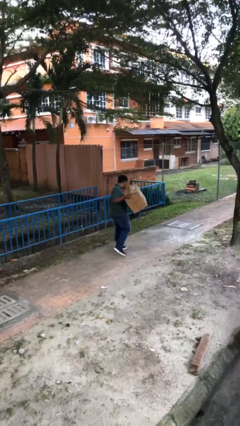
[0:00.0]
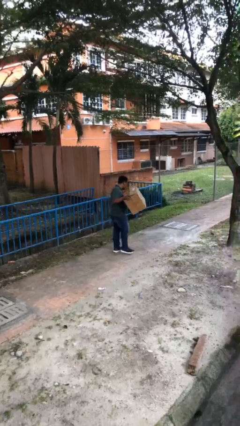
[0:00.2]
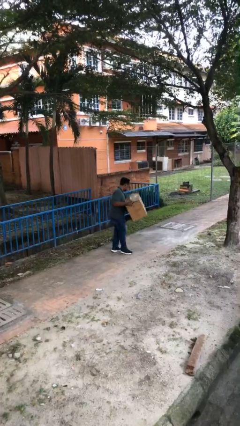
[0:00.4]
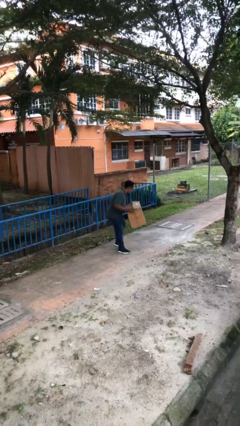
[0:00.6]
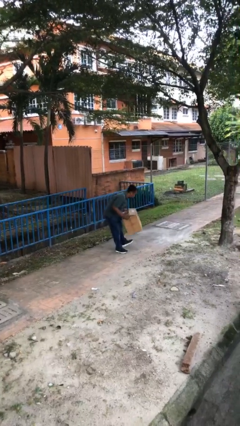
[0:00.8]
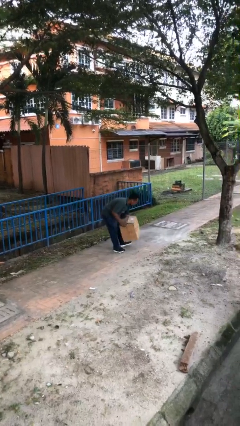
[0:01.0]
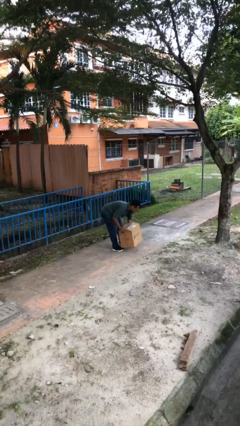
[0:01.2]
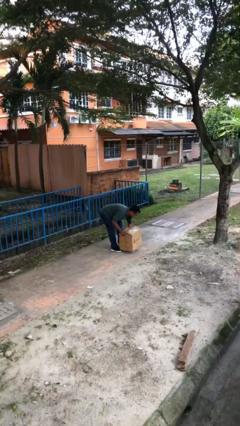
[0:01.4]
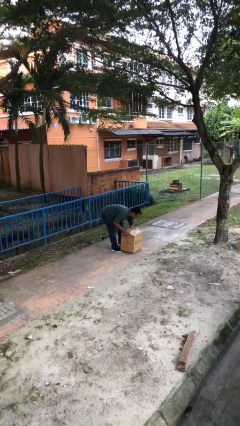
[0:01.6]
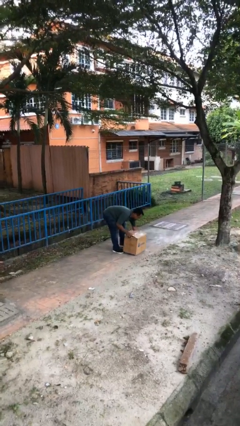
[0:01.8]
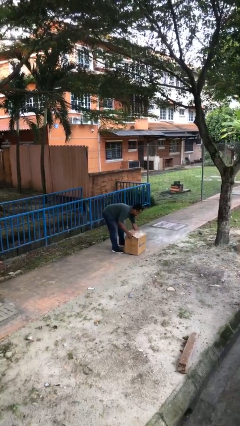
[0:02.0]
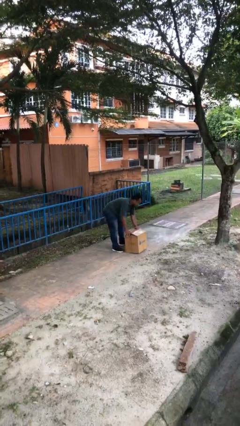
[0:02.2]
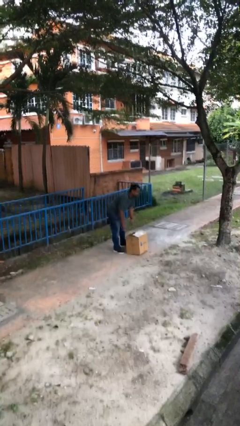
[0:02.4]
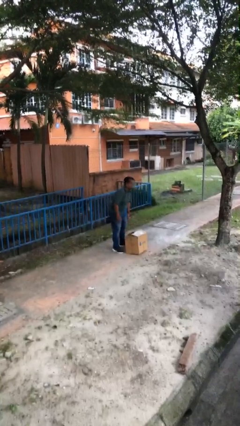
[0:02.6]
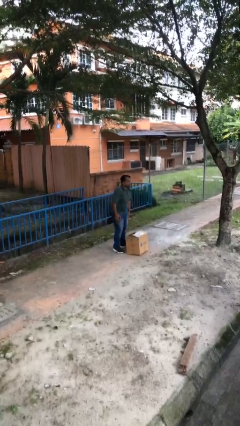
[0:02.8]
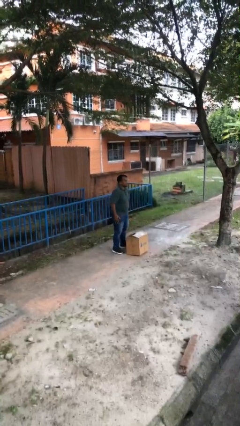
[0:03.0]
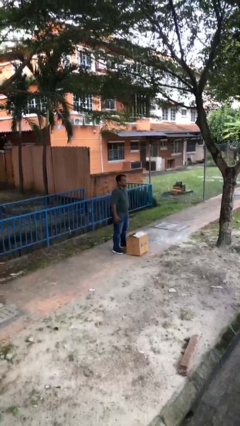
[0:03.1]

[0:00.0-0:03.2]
person puts down object on floor

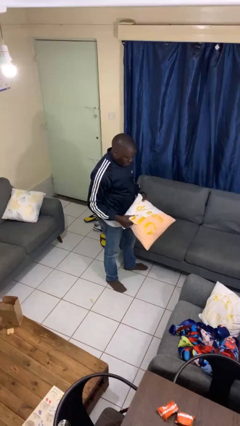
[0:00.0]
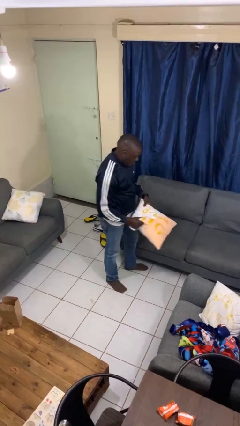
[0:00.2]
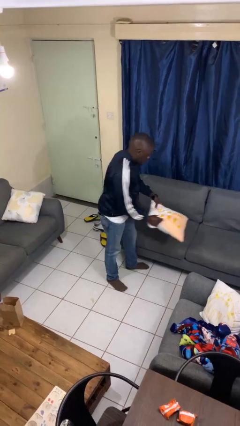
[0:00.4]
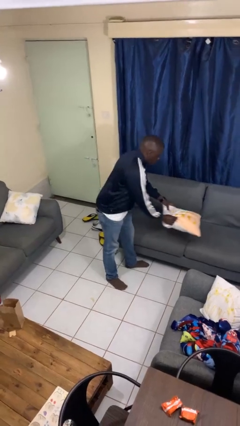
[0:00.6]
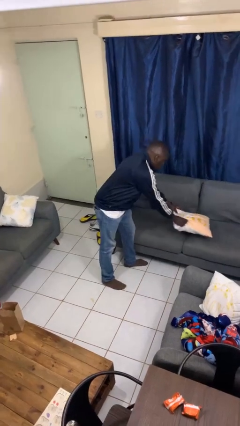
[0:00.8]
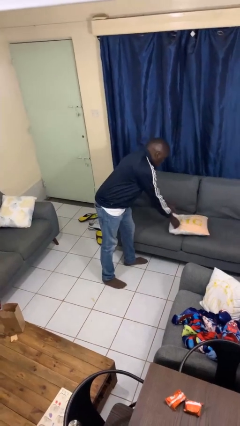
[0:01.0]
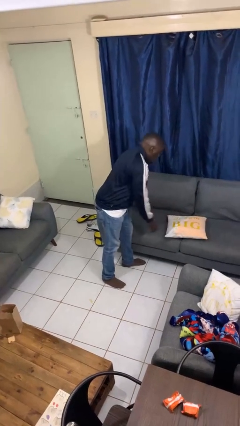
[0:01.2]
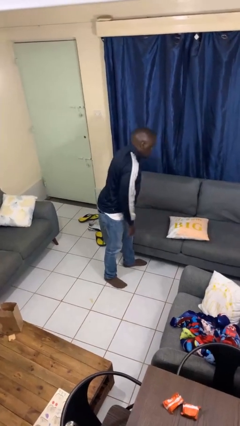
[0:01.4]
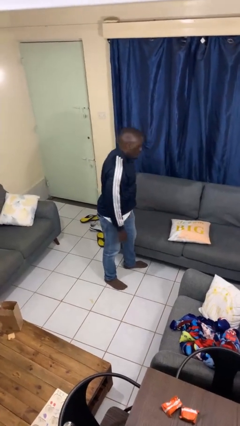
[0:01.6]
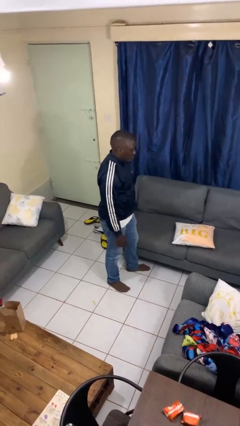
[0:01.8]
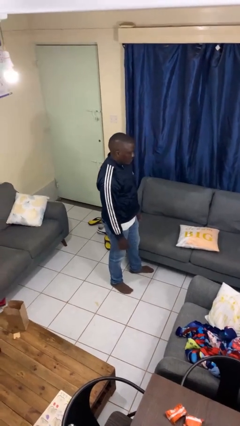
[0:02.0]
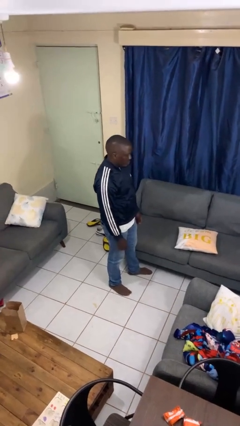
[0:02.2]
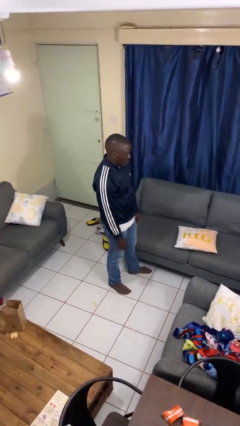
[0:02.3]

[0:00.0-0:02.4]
person puts down object on couch

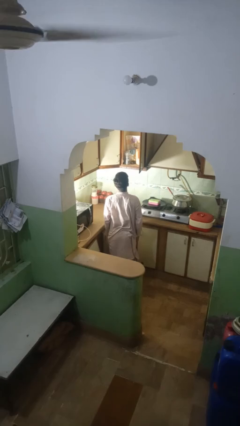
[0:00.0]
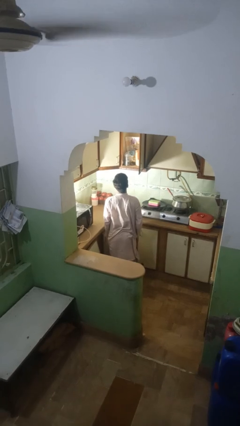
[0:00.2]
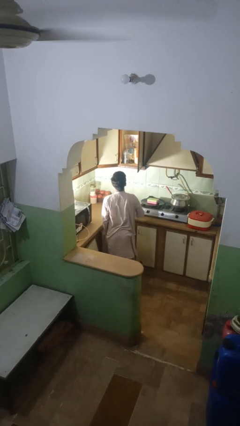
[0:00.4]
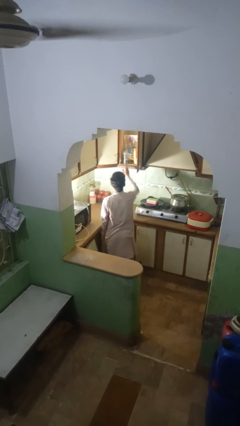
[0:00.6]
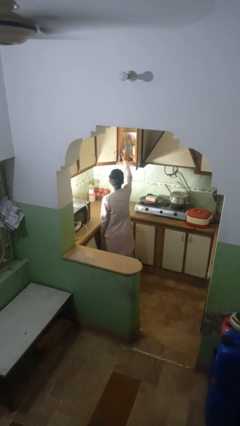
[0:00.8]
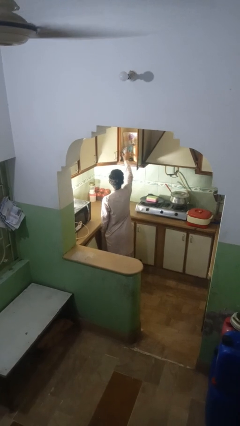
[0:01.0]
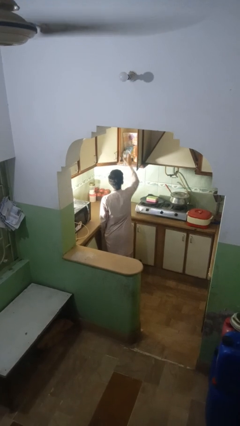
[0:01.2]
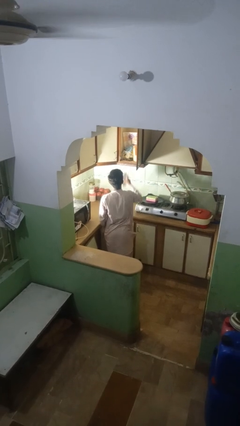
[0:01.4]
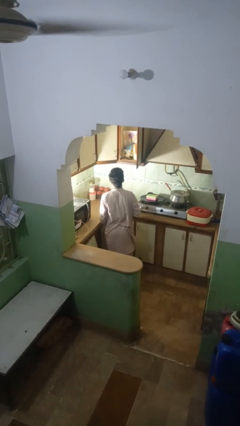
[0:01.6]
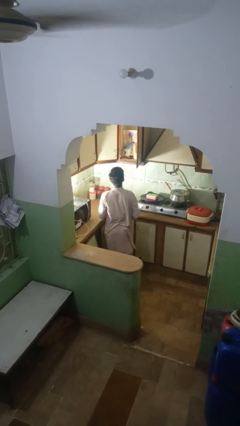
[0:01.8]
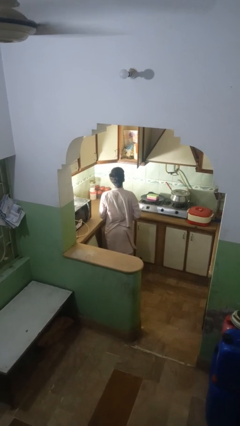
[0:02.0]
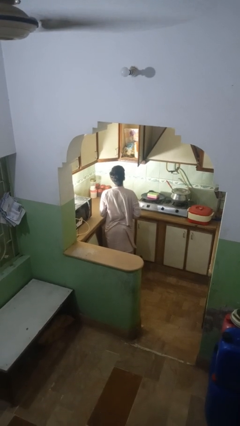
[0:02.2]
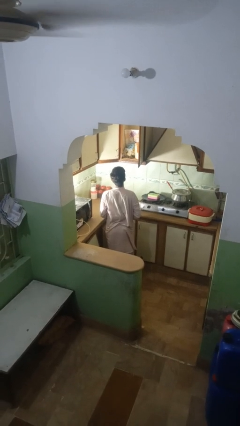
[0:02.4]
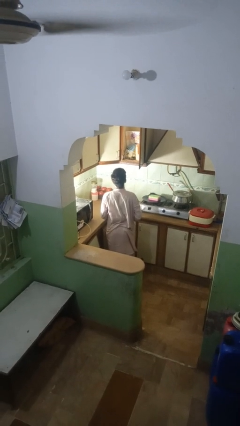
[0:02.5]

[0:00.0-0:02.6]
person takes object from kitchen drawer

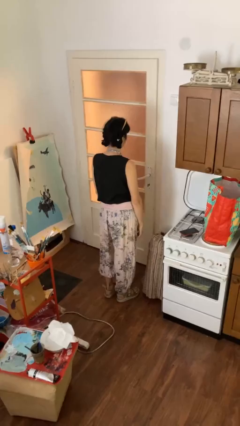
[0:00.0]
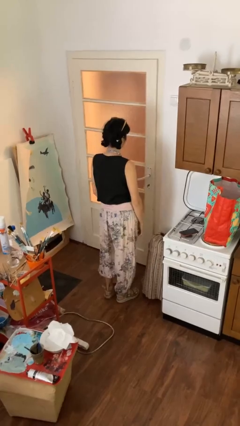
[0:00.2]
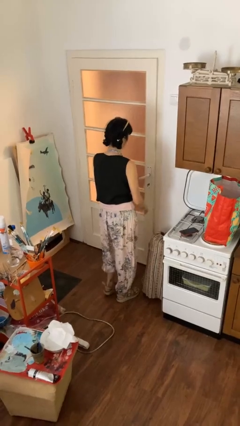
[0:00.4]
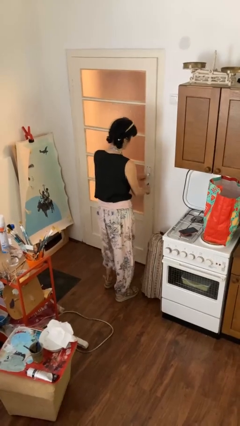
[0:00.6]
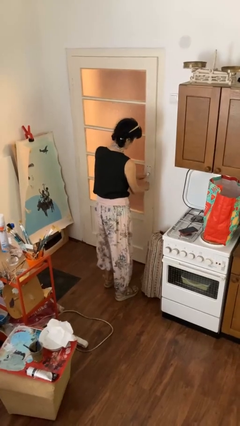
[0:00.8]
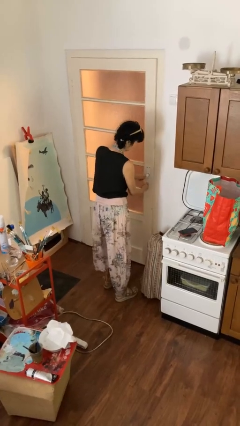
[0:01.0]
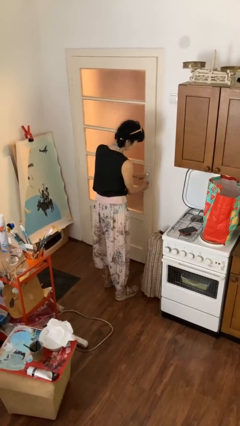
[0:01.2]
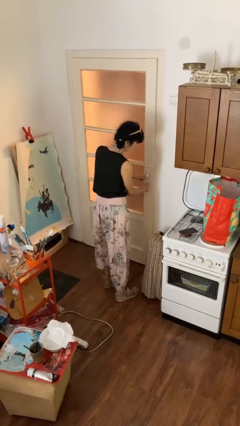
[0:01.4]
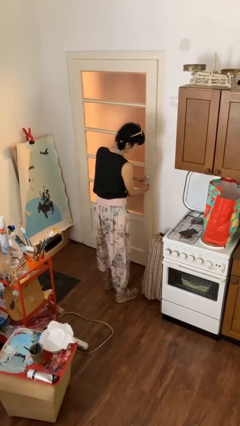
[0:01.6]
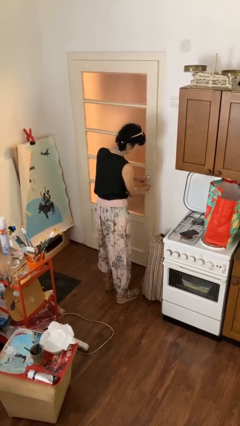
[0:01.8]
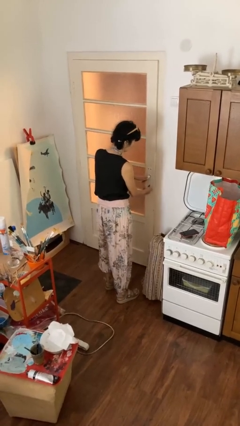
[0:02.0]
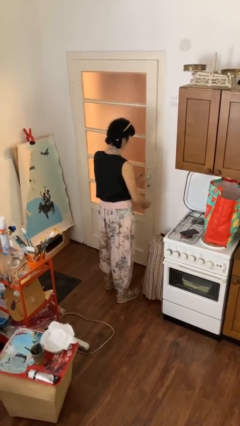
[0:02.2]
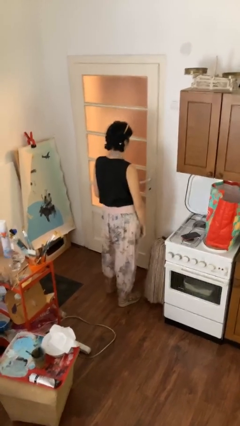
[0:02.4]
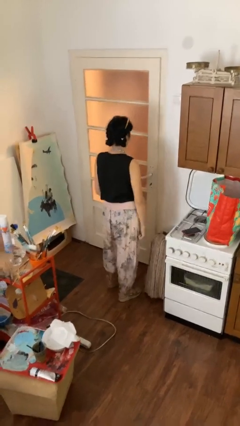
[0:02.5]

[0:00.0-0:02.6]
person locks door with keys

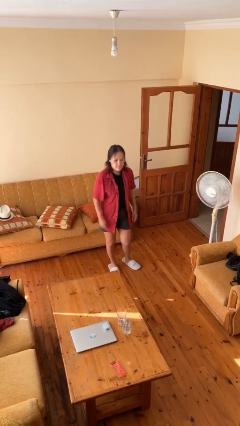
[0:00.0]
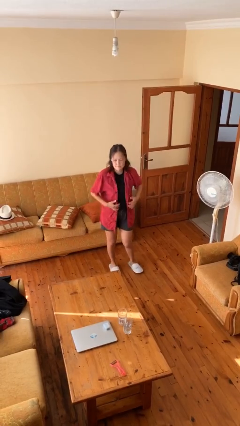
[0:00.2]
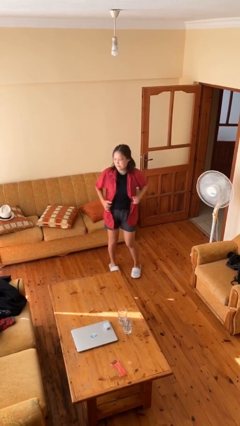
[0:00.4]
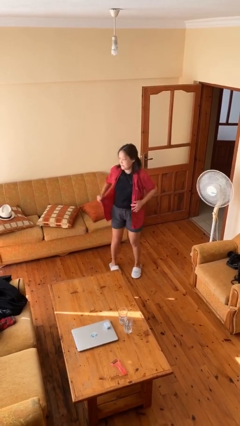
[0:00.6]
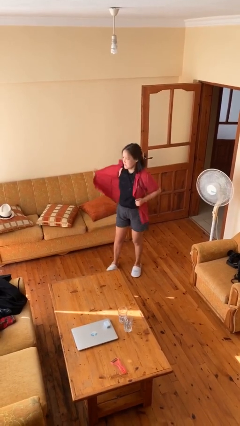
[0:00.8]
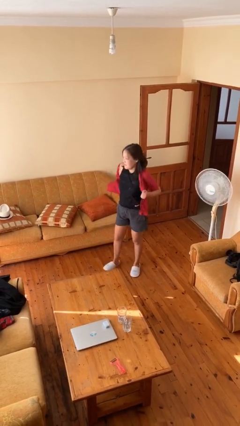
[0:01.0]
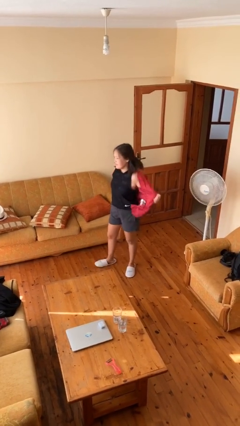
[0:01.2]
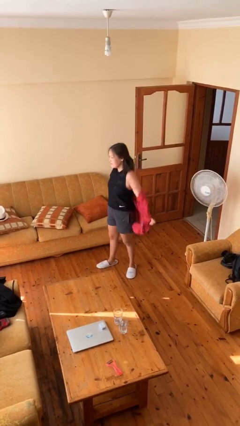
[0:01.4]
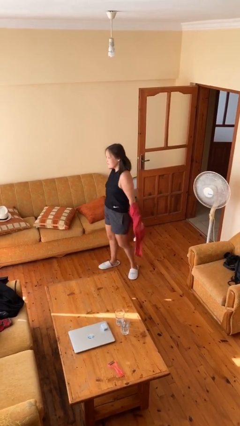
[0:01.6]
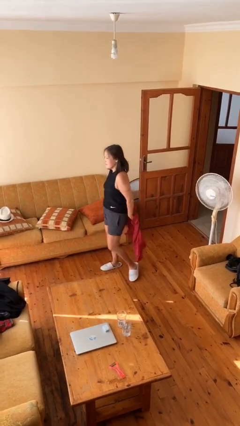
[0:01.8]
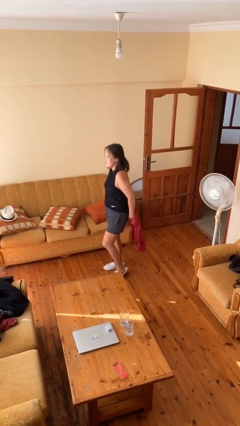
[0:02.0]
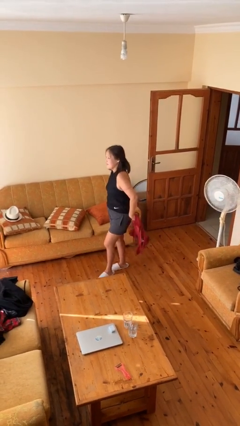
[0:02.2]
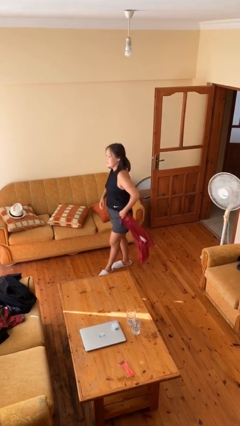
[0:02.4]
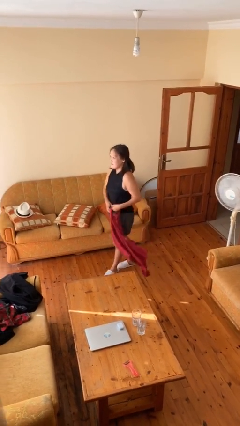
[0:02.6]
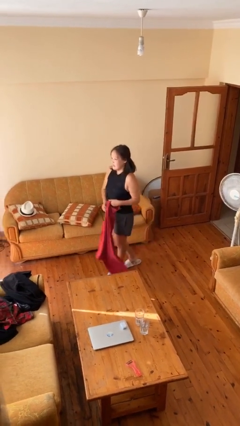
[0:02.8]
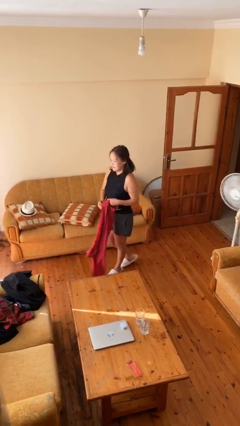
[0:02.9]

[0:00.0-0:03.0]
person takes off shirt

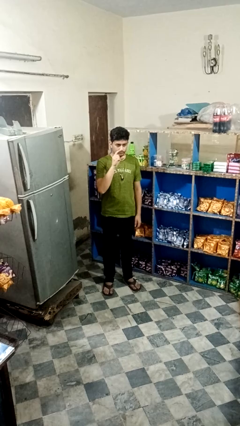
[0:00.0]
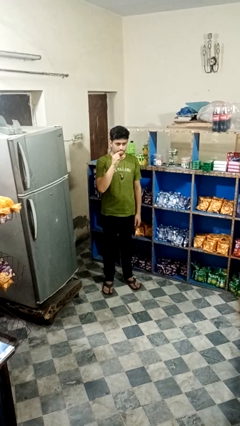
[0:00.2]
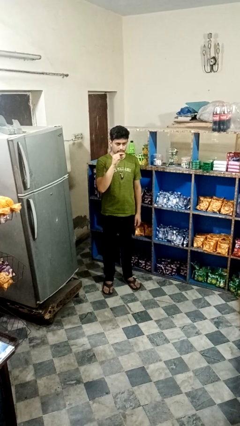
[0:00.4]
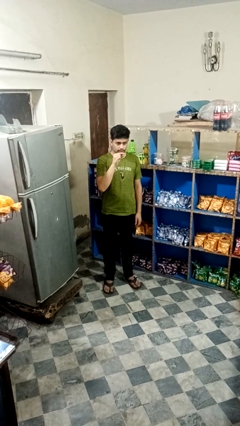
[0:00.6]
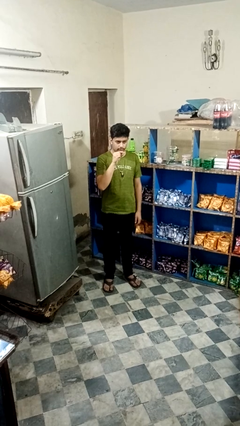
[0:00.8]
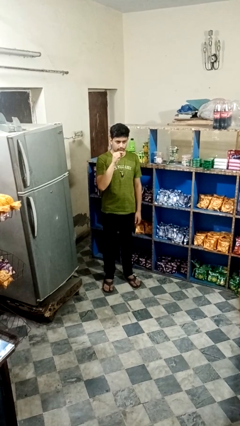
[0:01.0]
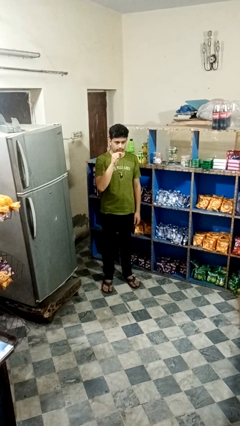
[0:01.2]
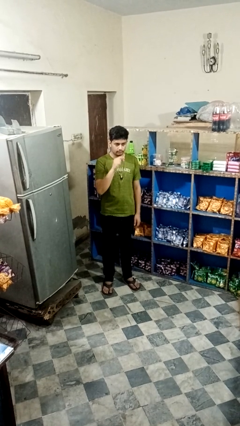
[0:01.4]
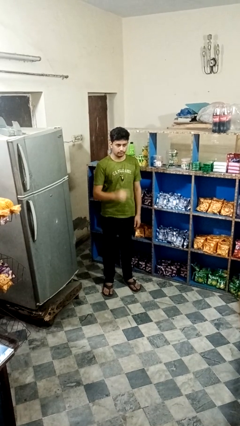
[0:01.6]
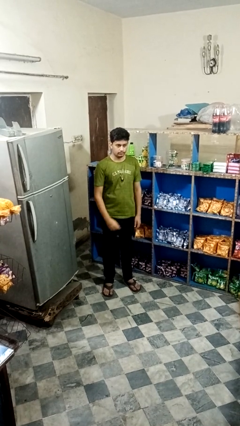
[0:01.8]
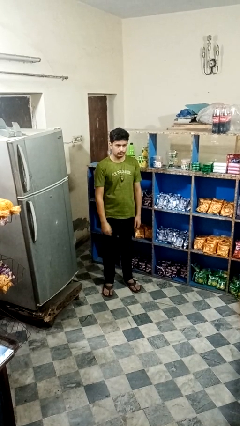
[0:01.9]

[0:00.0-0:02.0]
person gestures zoom out

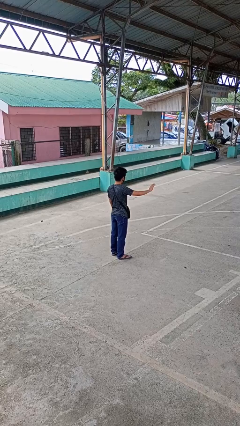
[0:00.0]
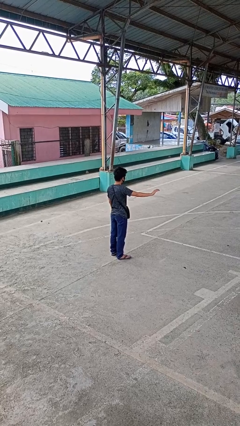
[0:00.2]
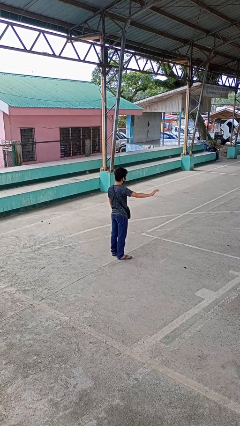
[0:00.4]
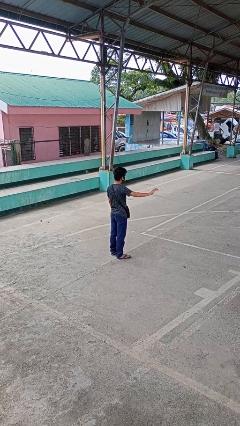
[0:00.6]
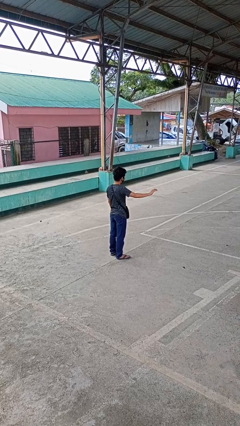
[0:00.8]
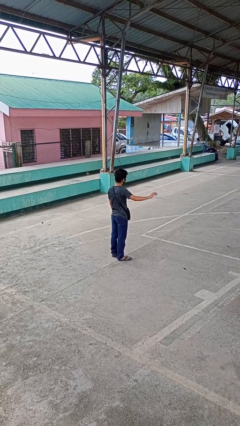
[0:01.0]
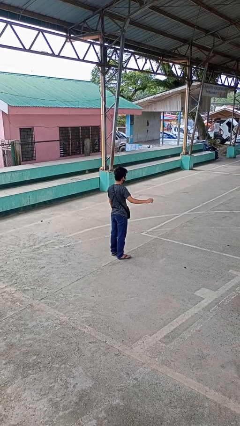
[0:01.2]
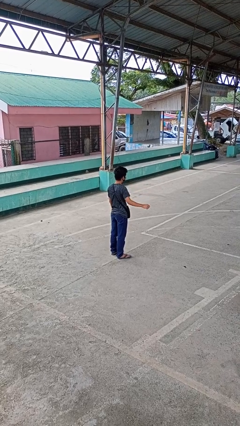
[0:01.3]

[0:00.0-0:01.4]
person gestures swipe right

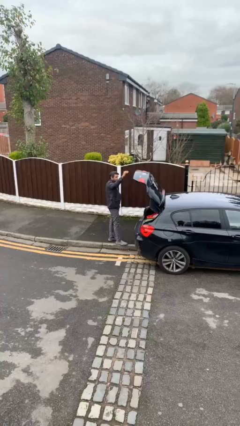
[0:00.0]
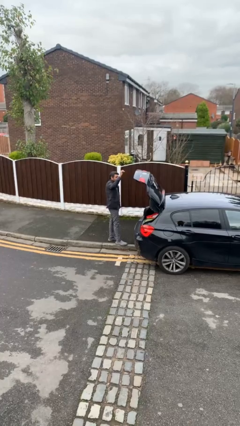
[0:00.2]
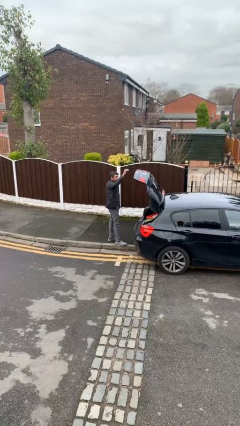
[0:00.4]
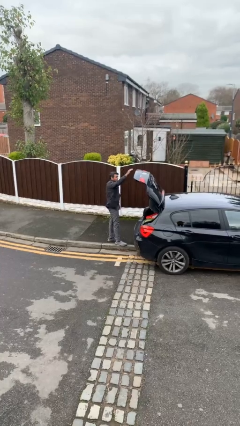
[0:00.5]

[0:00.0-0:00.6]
person closes car trunk
